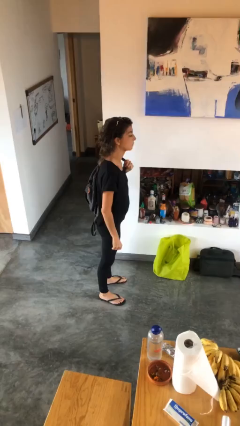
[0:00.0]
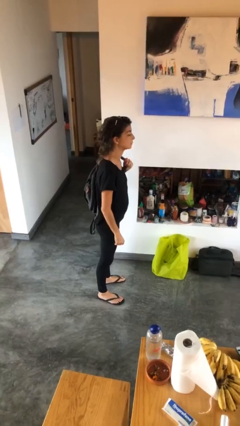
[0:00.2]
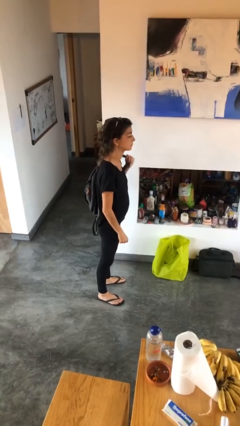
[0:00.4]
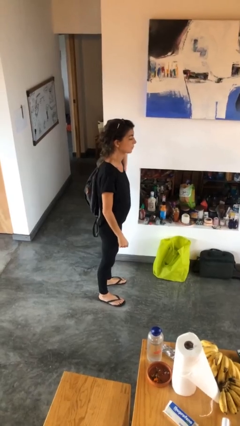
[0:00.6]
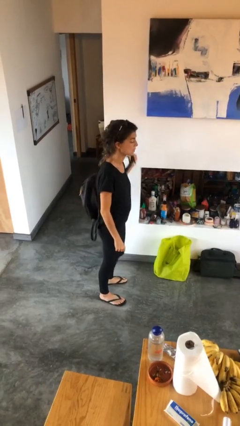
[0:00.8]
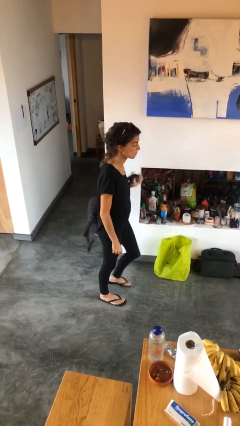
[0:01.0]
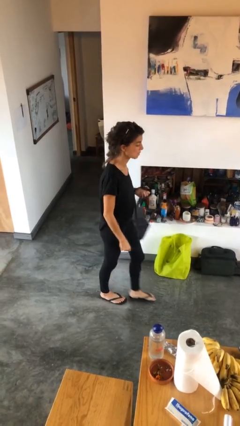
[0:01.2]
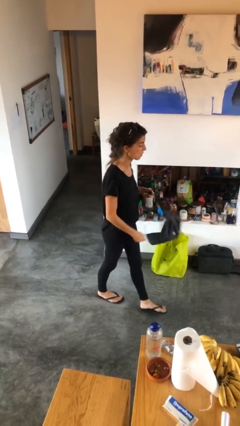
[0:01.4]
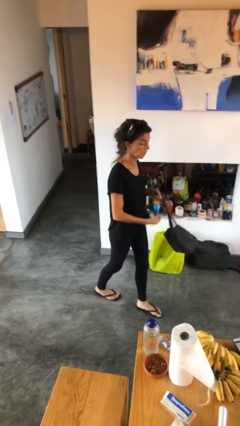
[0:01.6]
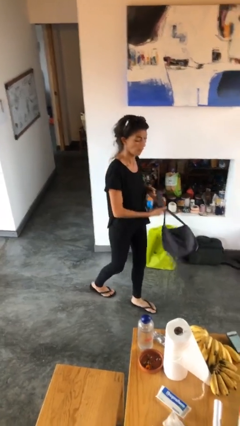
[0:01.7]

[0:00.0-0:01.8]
person takes off backpack

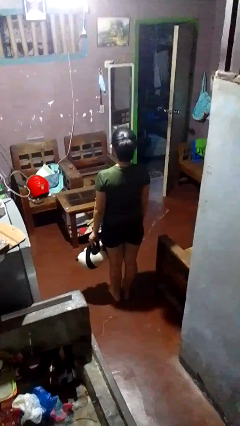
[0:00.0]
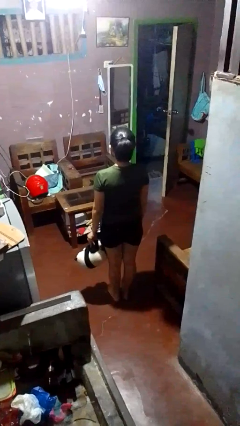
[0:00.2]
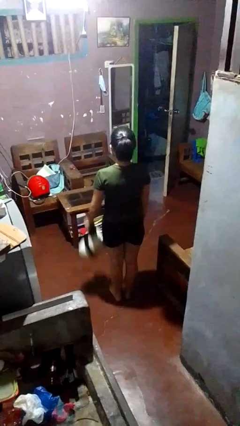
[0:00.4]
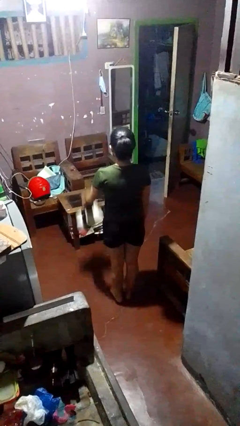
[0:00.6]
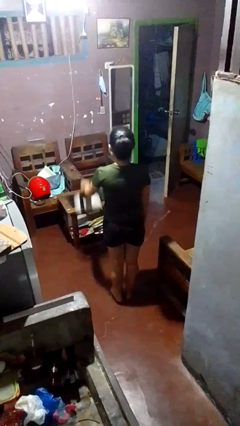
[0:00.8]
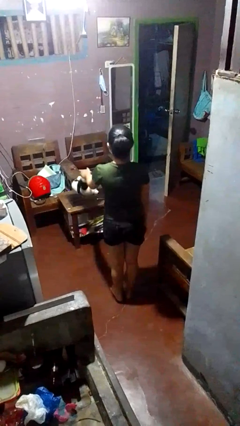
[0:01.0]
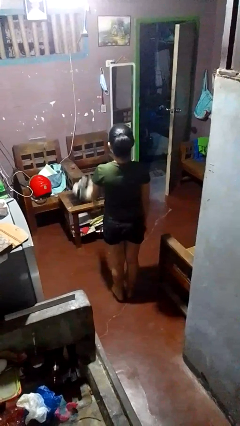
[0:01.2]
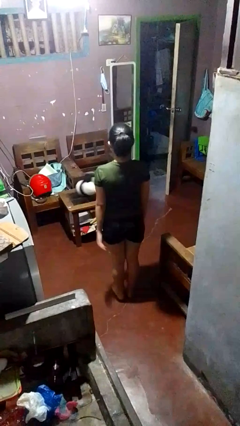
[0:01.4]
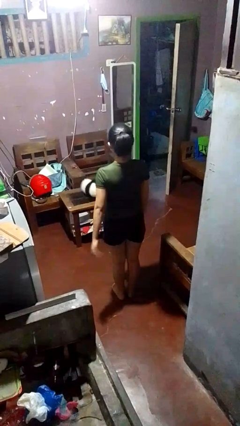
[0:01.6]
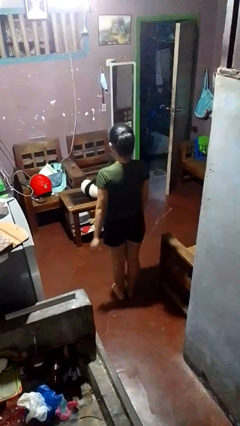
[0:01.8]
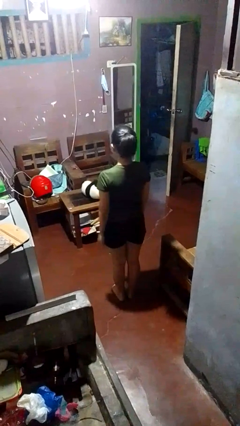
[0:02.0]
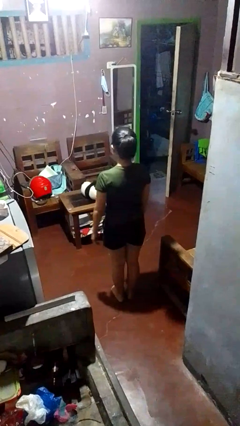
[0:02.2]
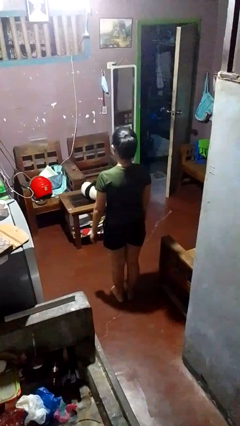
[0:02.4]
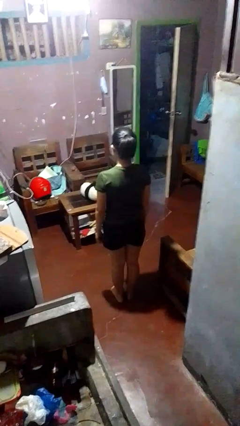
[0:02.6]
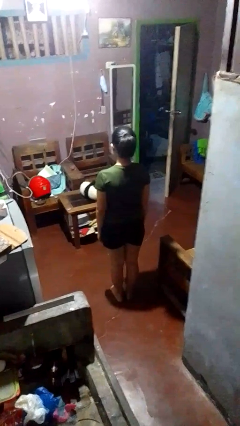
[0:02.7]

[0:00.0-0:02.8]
person throws object on table

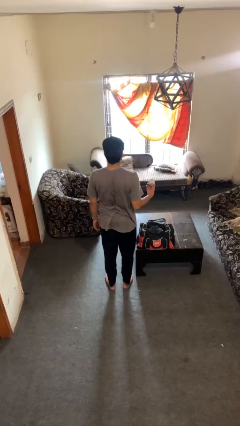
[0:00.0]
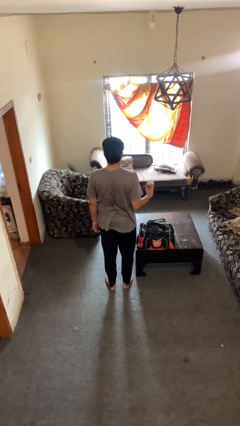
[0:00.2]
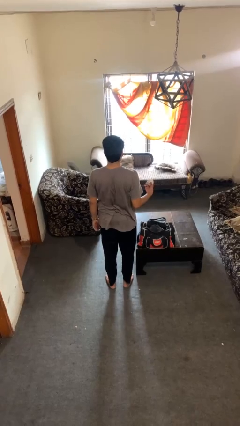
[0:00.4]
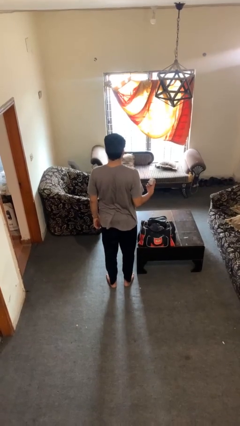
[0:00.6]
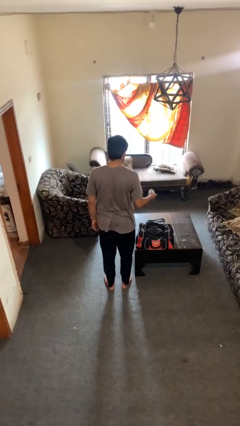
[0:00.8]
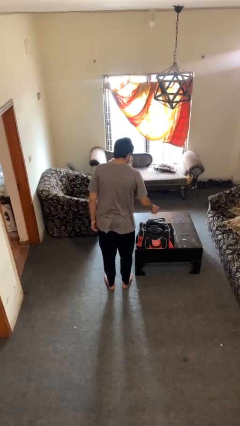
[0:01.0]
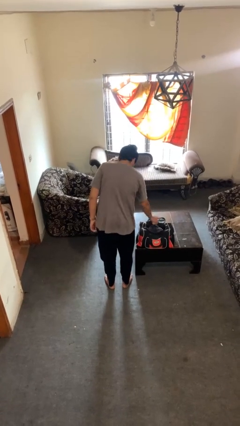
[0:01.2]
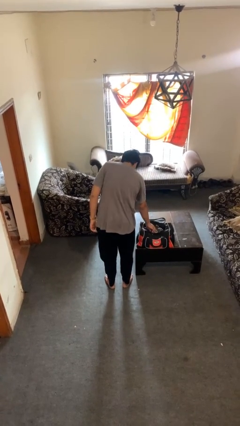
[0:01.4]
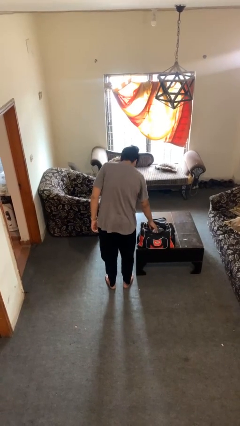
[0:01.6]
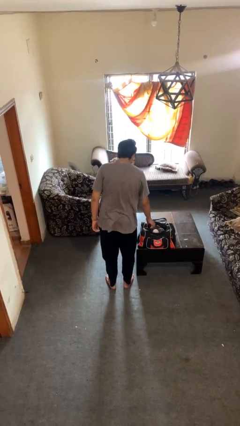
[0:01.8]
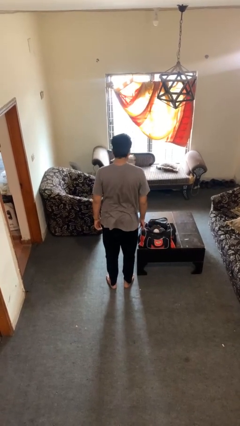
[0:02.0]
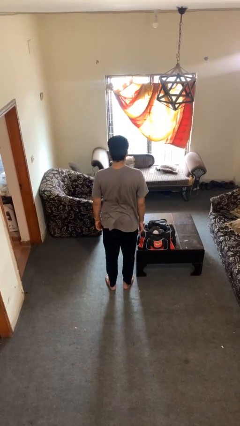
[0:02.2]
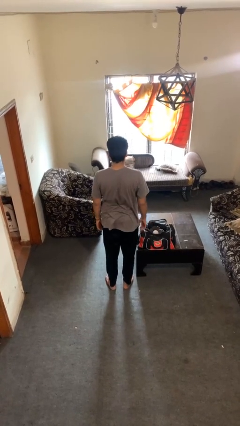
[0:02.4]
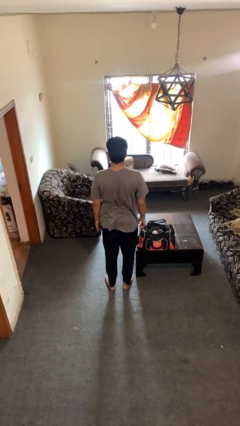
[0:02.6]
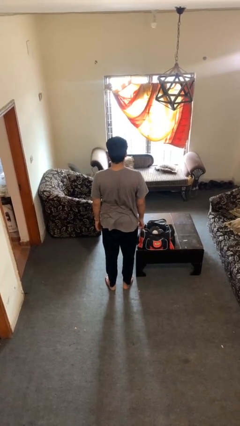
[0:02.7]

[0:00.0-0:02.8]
person puts object into bag

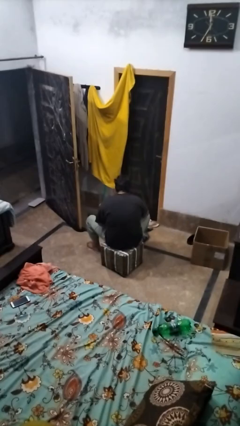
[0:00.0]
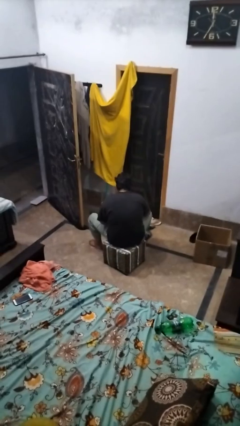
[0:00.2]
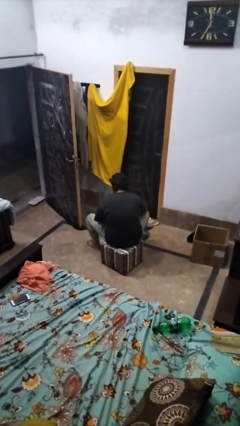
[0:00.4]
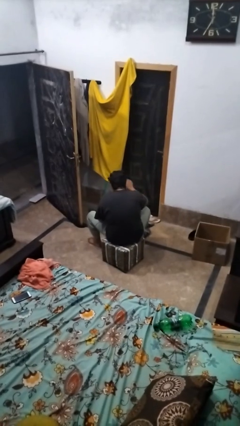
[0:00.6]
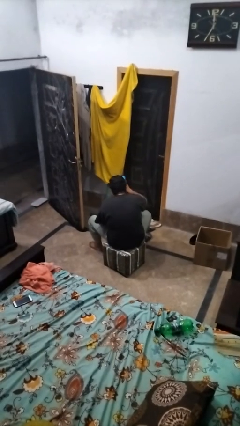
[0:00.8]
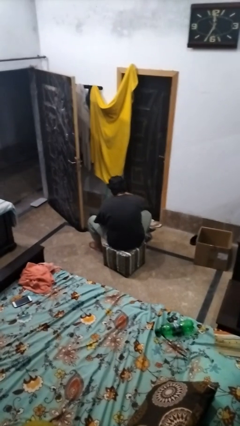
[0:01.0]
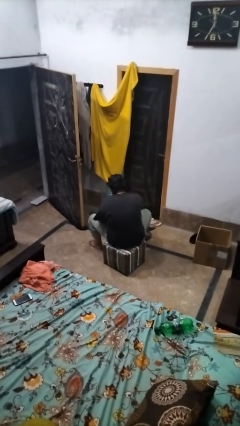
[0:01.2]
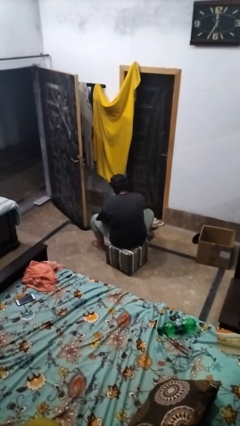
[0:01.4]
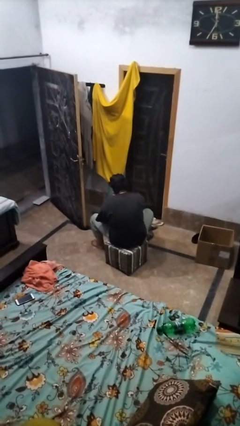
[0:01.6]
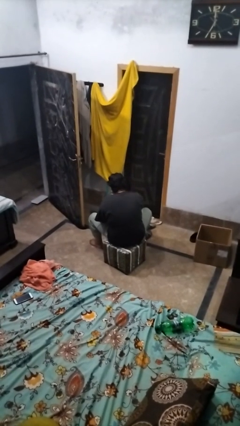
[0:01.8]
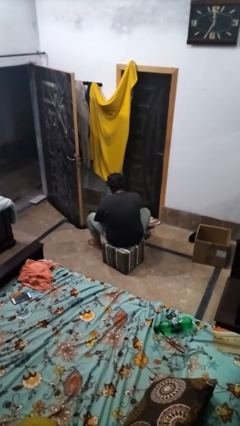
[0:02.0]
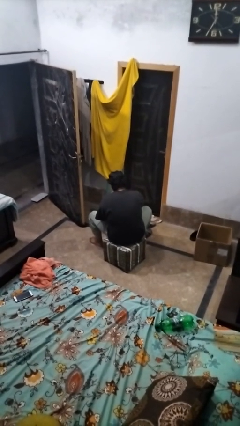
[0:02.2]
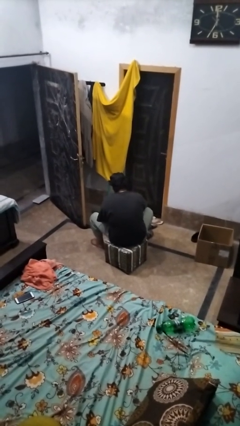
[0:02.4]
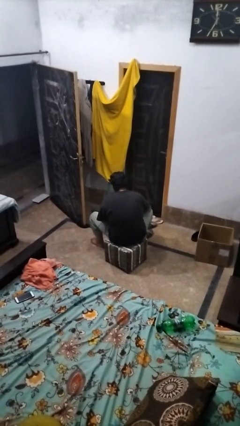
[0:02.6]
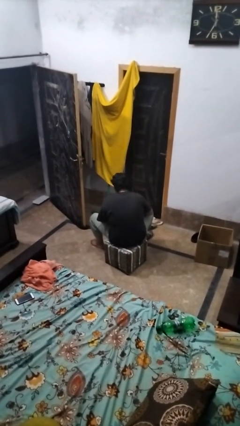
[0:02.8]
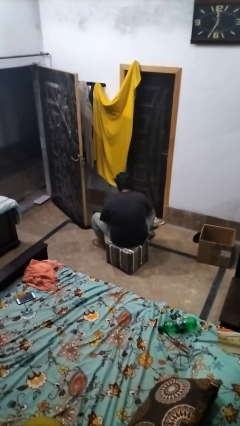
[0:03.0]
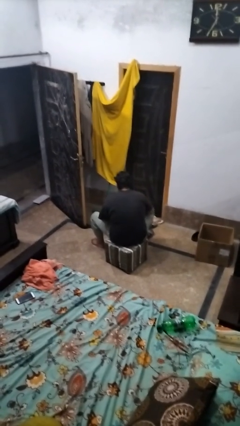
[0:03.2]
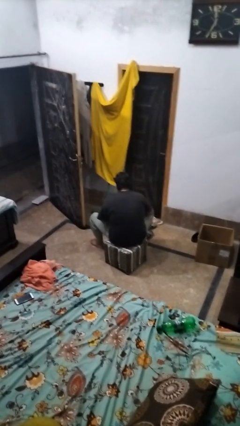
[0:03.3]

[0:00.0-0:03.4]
person pours coffee into mug

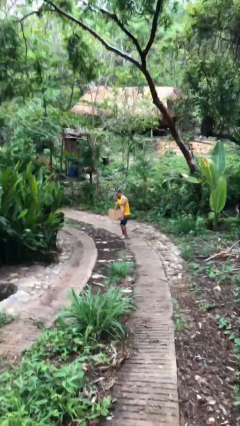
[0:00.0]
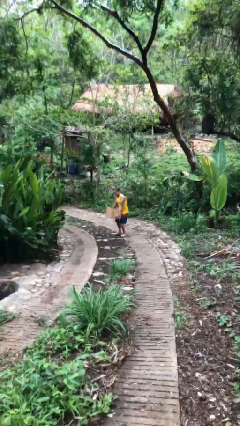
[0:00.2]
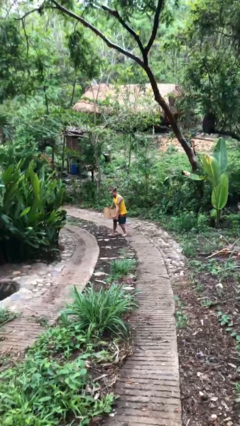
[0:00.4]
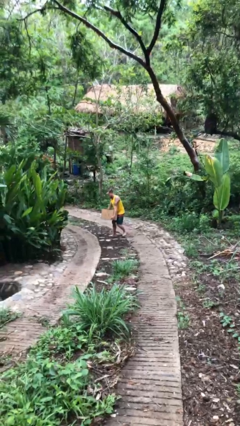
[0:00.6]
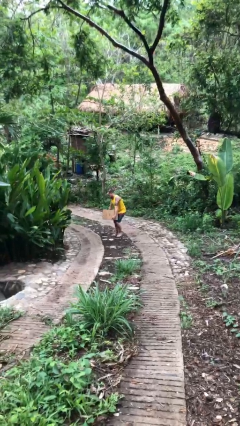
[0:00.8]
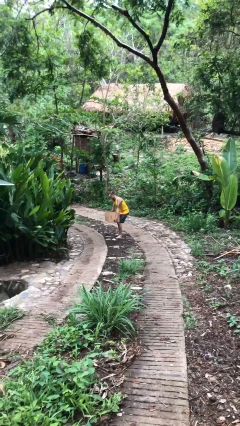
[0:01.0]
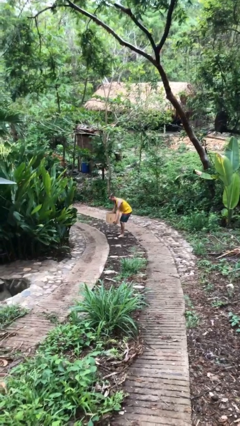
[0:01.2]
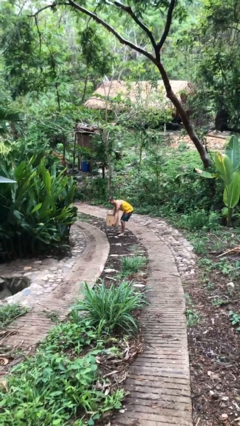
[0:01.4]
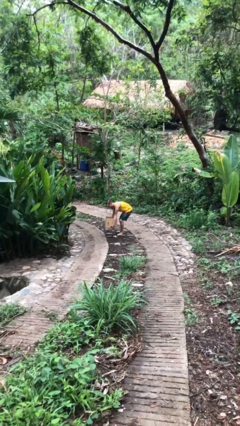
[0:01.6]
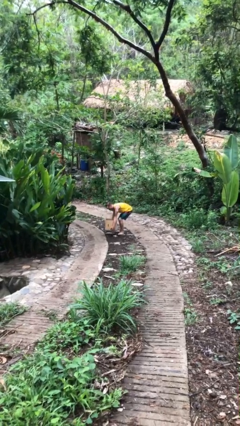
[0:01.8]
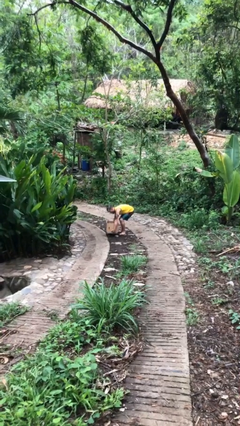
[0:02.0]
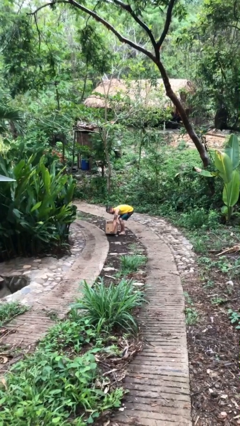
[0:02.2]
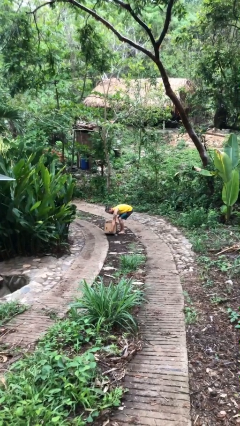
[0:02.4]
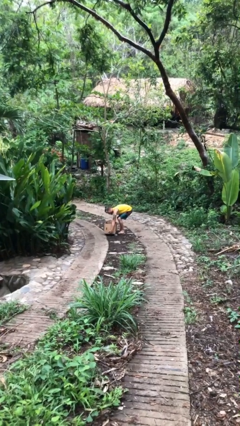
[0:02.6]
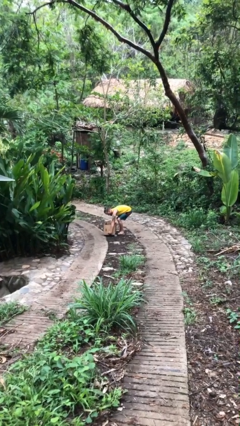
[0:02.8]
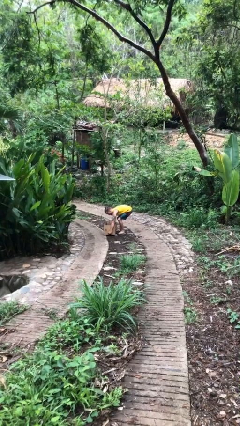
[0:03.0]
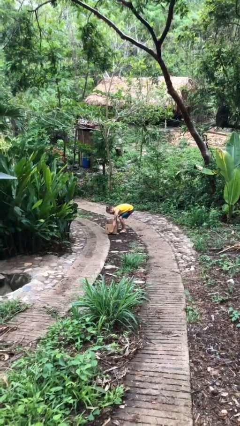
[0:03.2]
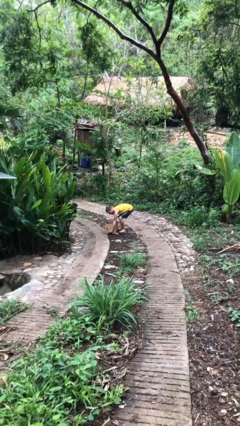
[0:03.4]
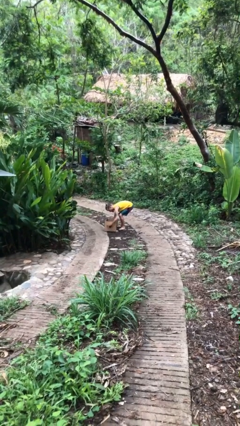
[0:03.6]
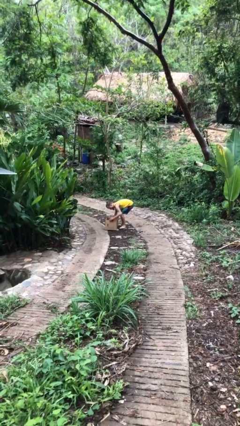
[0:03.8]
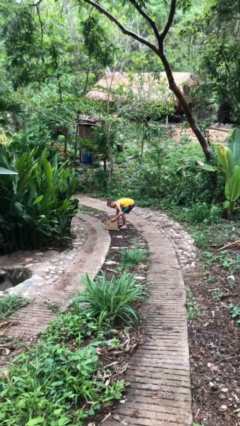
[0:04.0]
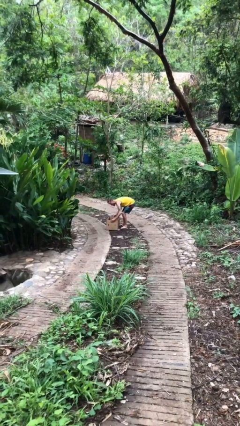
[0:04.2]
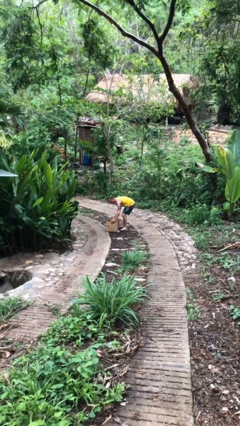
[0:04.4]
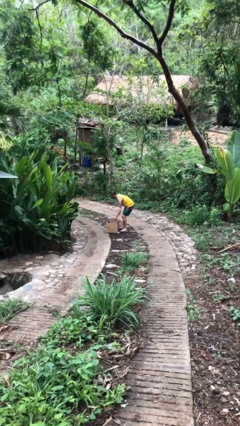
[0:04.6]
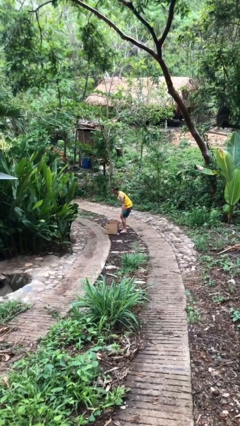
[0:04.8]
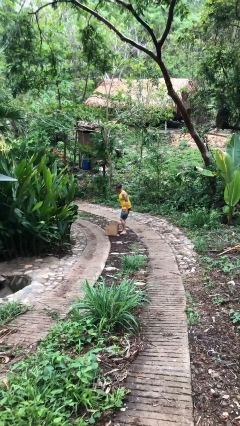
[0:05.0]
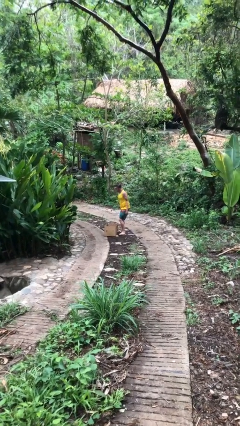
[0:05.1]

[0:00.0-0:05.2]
person puts down object on floor

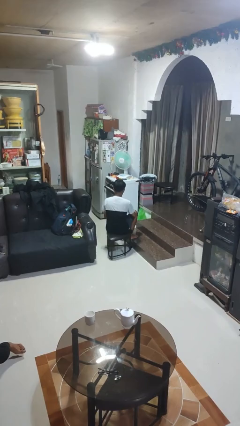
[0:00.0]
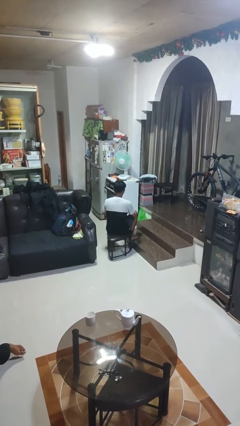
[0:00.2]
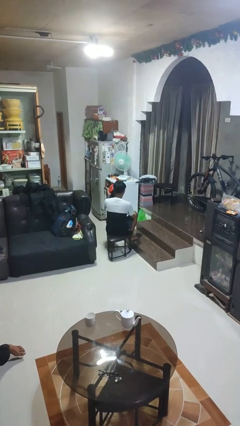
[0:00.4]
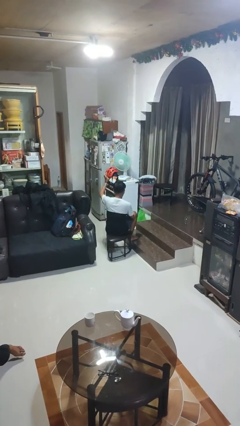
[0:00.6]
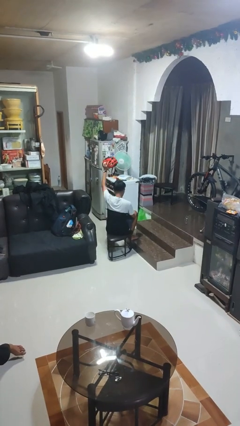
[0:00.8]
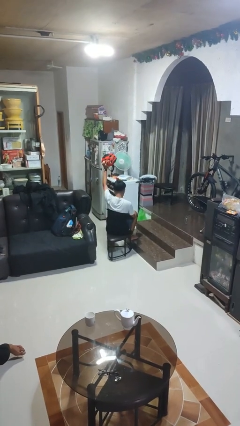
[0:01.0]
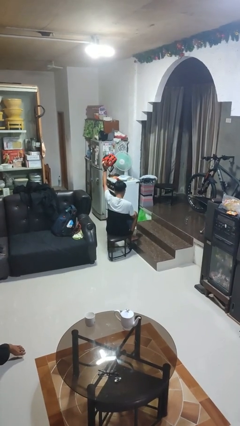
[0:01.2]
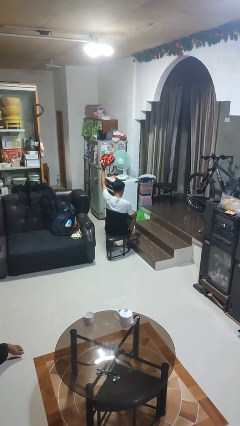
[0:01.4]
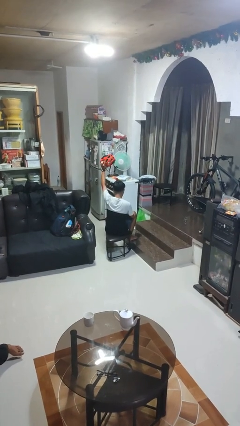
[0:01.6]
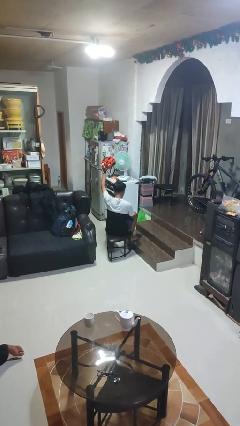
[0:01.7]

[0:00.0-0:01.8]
person holds object above head
